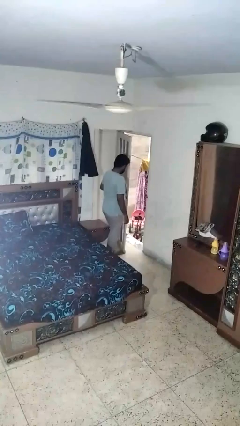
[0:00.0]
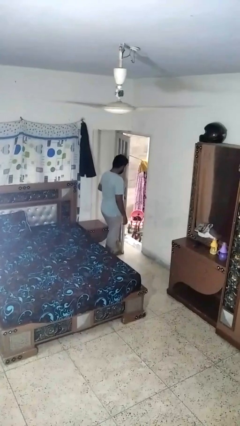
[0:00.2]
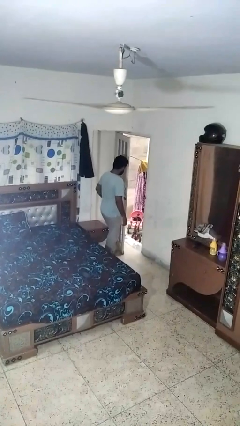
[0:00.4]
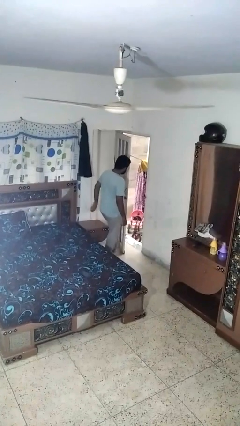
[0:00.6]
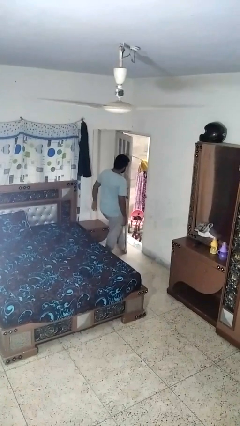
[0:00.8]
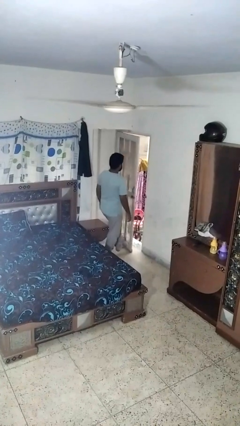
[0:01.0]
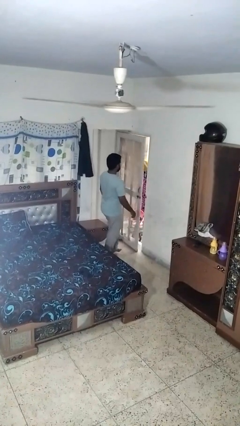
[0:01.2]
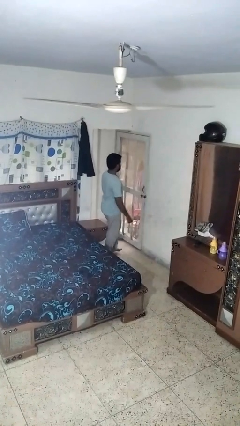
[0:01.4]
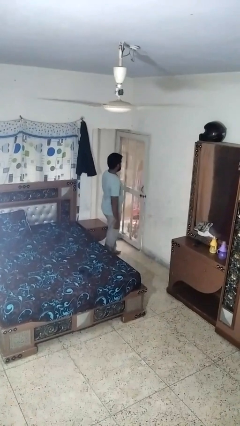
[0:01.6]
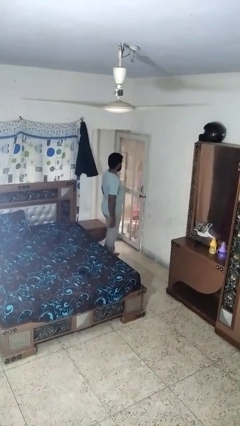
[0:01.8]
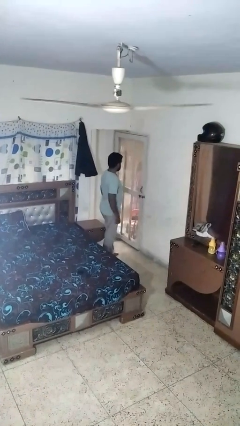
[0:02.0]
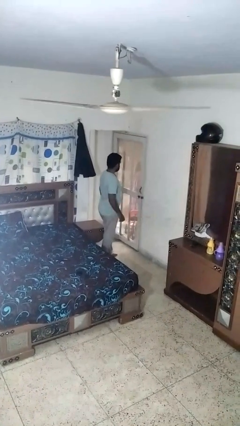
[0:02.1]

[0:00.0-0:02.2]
person closes door with foot

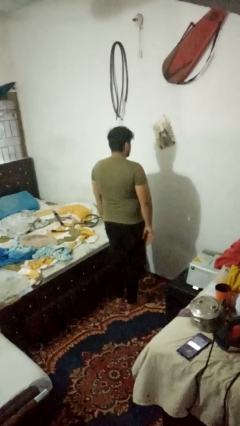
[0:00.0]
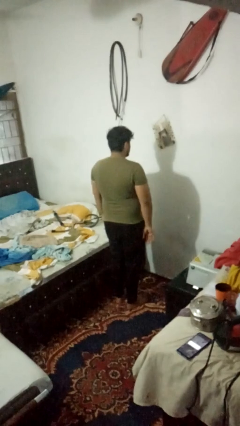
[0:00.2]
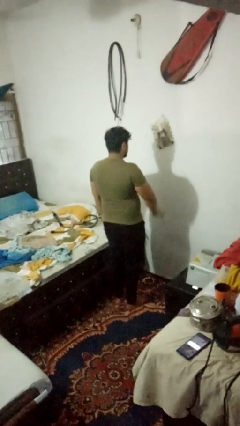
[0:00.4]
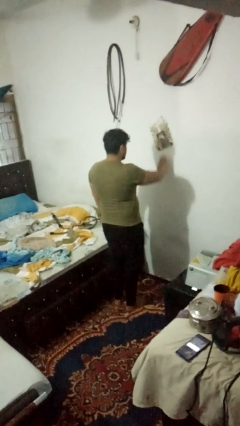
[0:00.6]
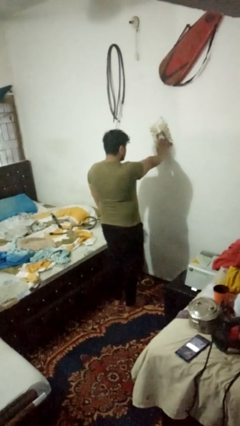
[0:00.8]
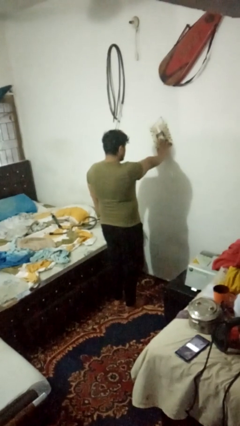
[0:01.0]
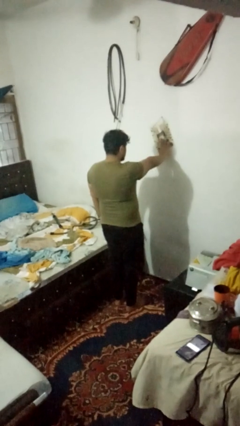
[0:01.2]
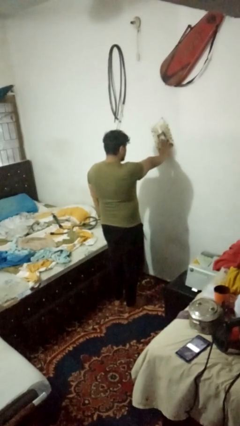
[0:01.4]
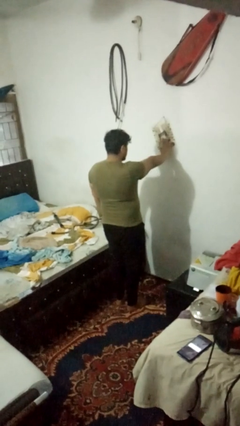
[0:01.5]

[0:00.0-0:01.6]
person gestures stop

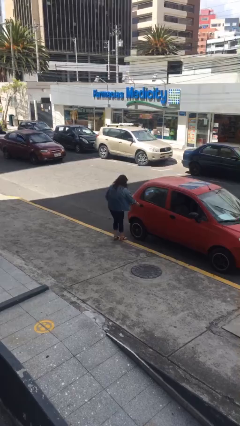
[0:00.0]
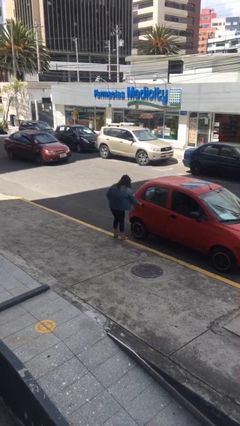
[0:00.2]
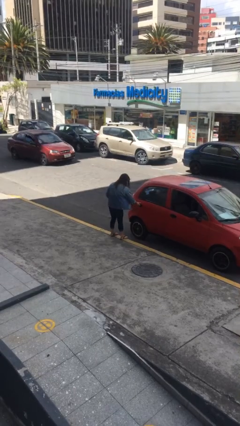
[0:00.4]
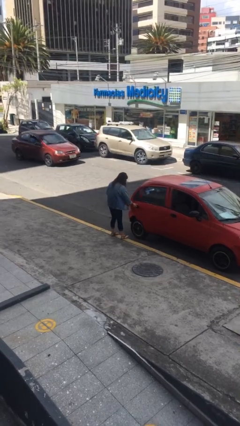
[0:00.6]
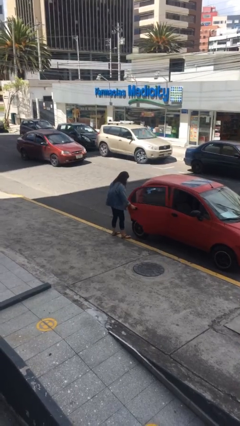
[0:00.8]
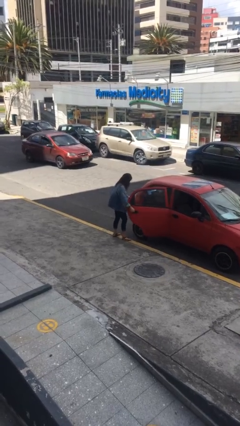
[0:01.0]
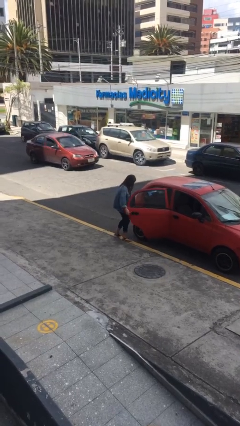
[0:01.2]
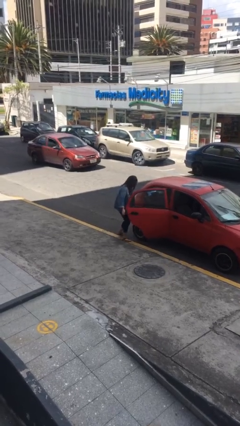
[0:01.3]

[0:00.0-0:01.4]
person opens car door

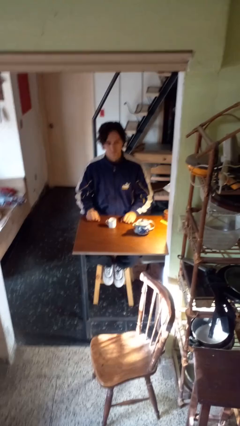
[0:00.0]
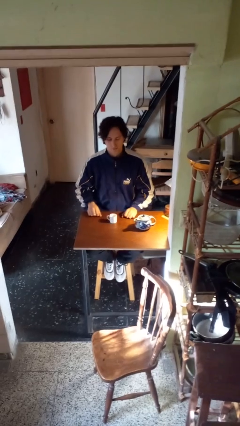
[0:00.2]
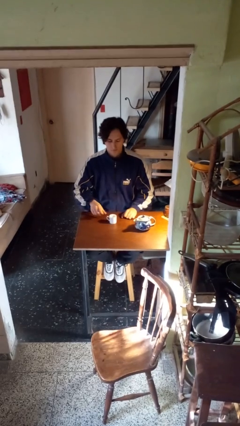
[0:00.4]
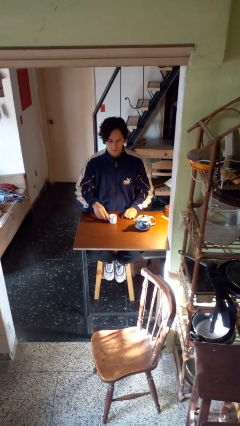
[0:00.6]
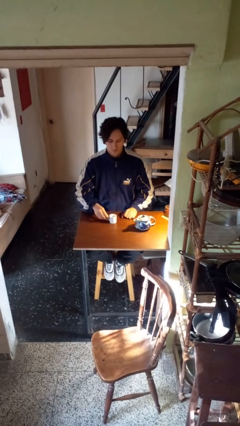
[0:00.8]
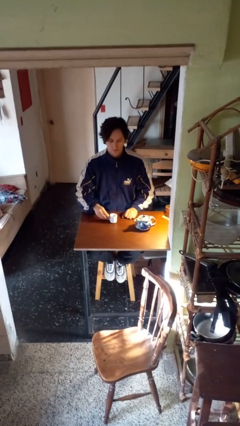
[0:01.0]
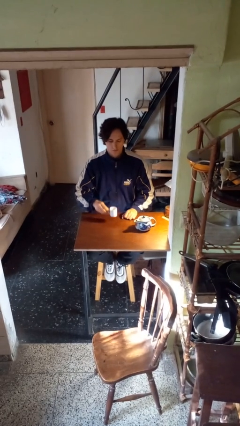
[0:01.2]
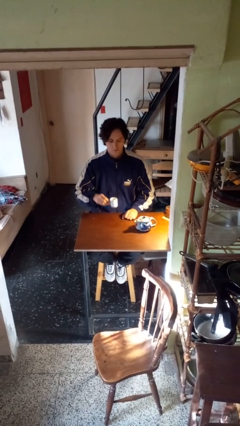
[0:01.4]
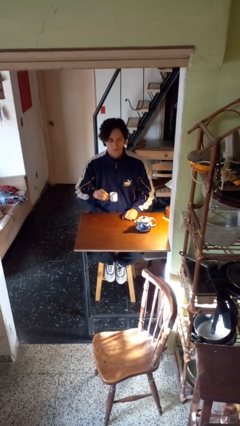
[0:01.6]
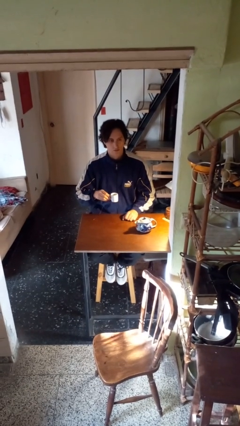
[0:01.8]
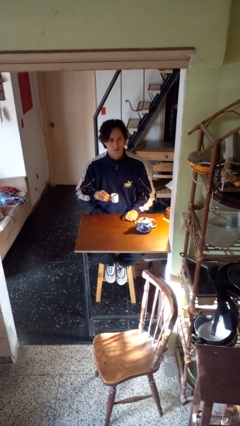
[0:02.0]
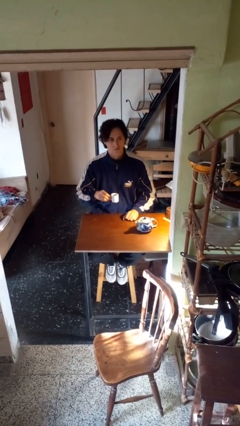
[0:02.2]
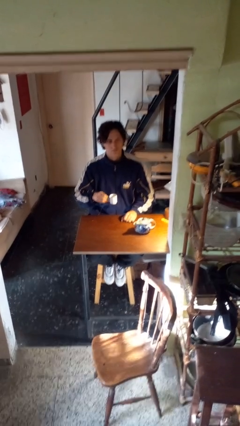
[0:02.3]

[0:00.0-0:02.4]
person picks up object from table

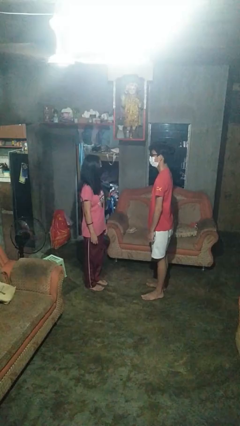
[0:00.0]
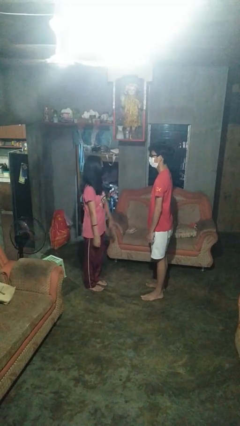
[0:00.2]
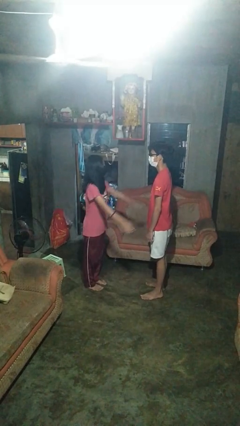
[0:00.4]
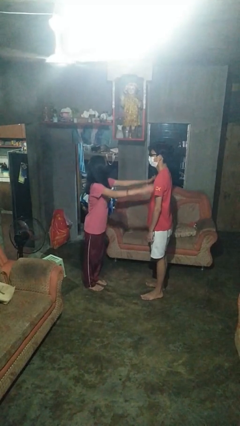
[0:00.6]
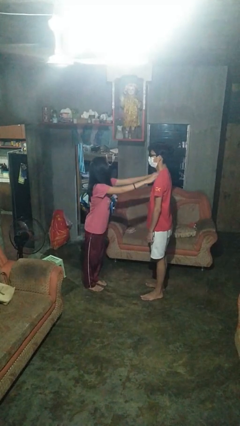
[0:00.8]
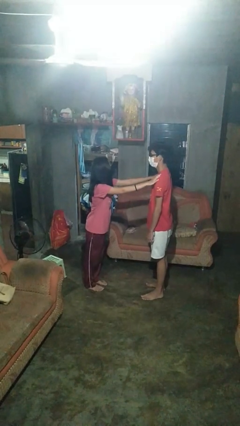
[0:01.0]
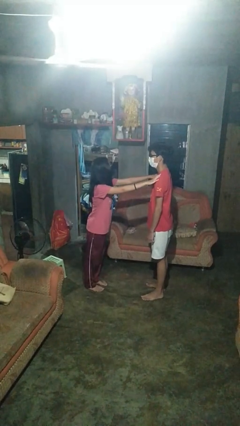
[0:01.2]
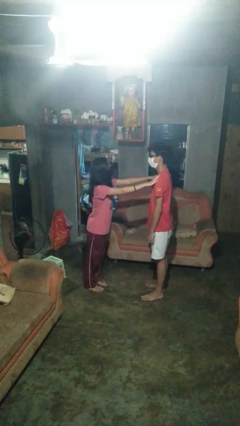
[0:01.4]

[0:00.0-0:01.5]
person pounds shoulders of person

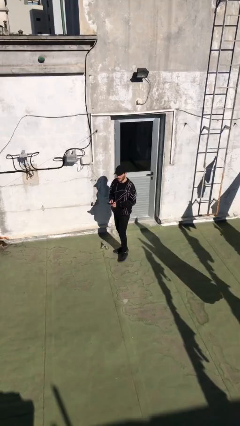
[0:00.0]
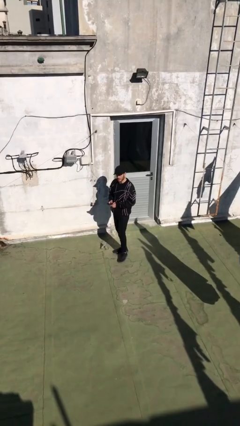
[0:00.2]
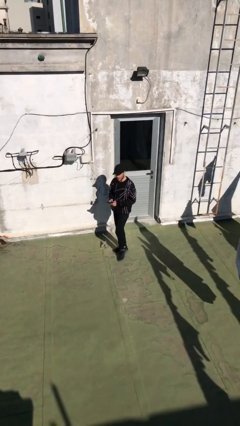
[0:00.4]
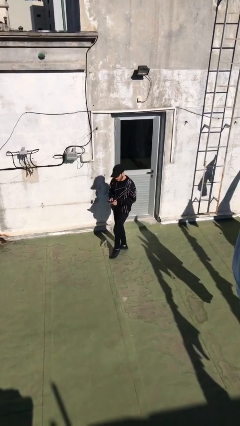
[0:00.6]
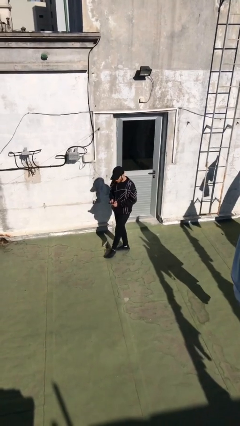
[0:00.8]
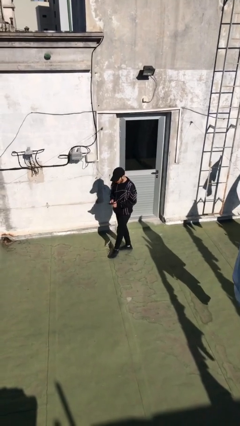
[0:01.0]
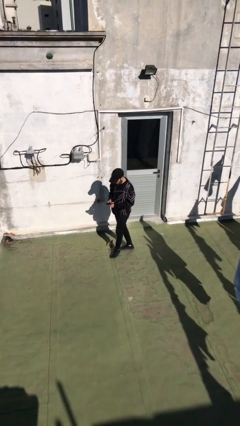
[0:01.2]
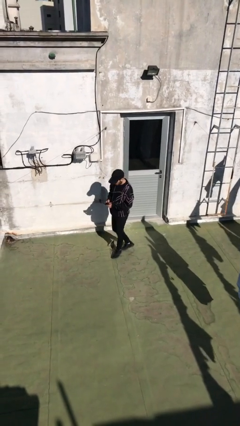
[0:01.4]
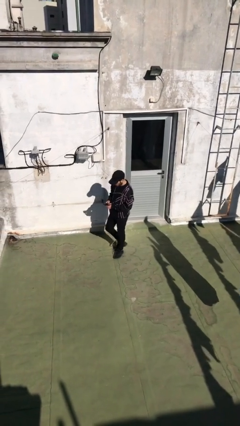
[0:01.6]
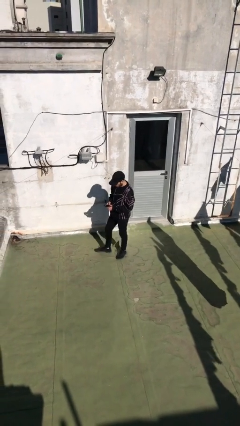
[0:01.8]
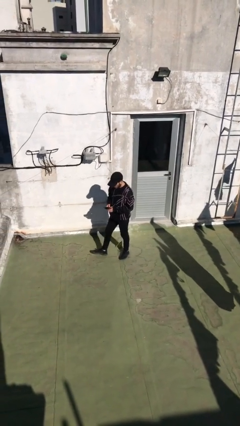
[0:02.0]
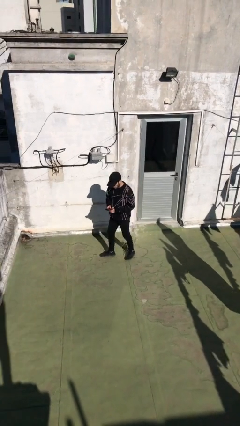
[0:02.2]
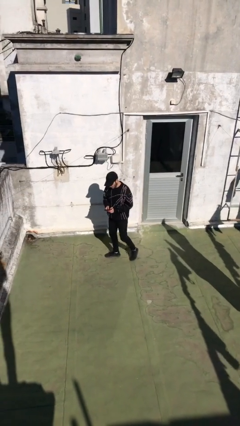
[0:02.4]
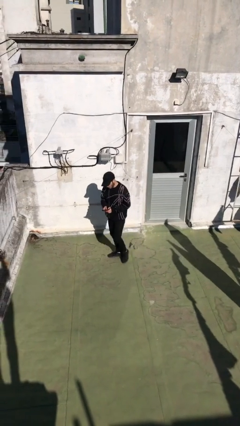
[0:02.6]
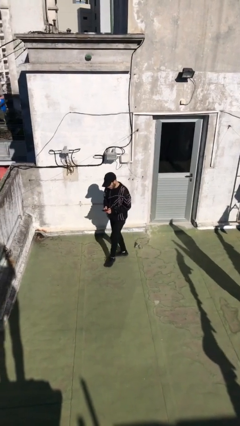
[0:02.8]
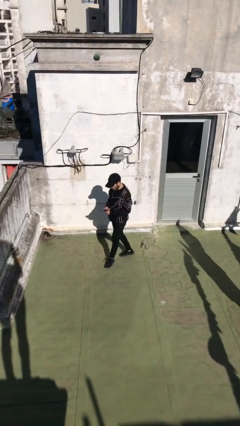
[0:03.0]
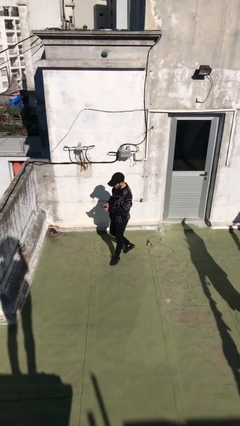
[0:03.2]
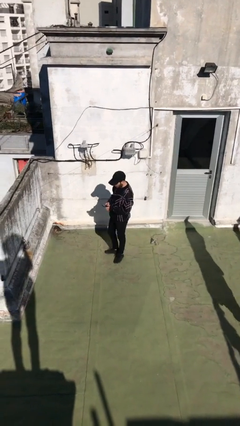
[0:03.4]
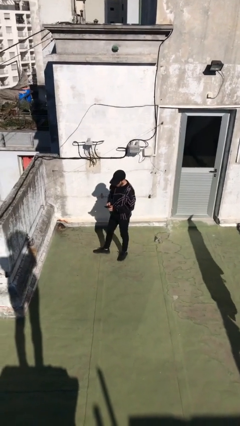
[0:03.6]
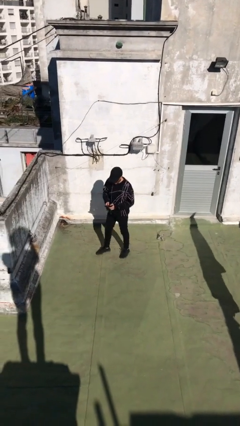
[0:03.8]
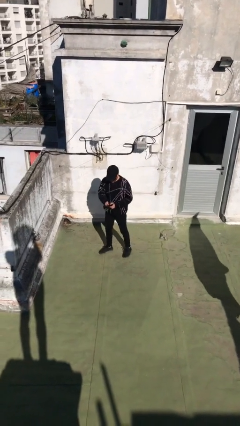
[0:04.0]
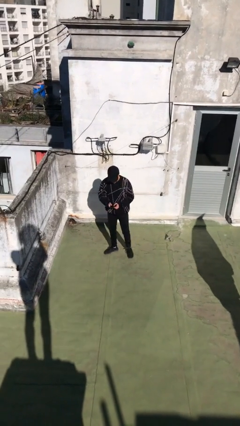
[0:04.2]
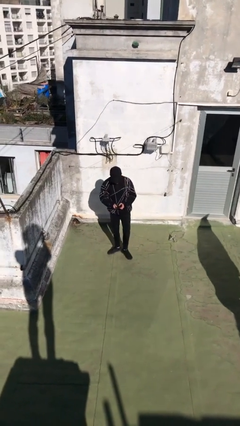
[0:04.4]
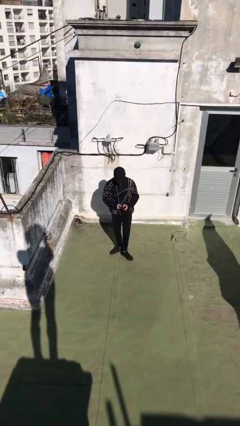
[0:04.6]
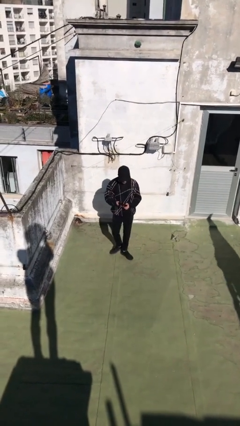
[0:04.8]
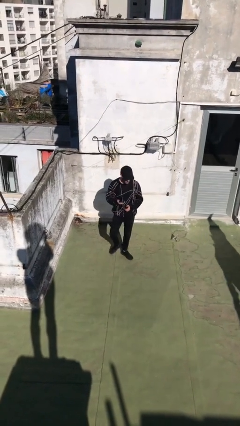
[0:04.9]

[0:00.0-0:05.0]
person texts on phone

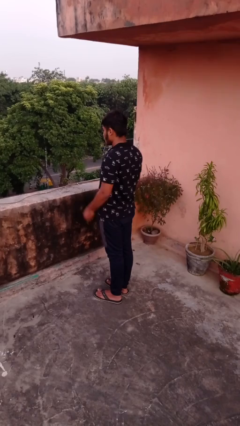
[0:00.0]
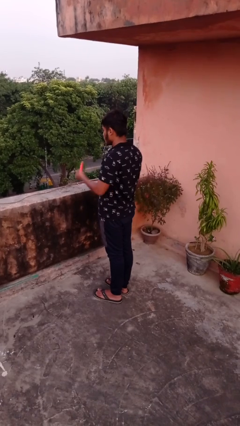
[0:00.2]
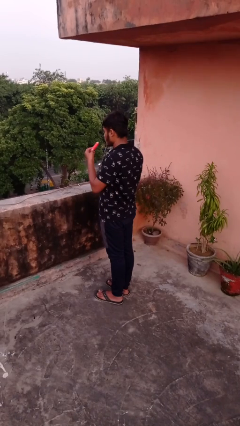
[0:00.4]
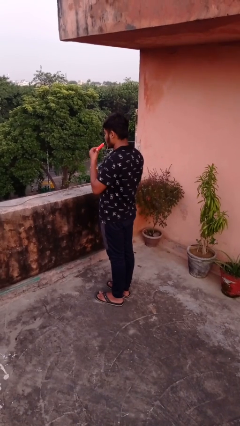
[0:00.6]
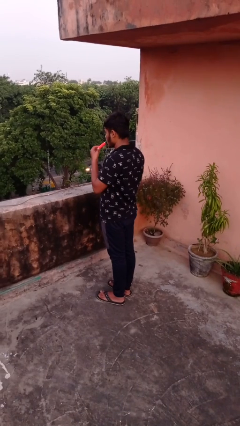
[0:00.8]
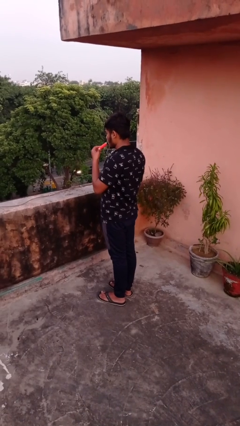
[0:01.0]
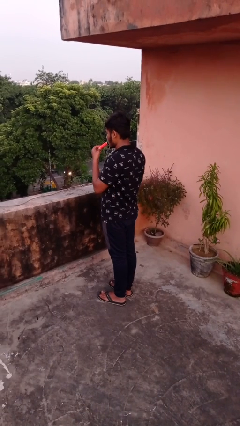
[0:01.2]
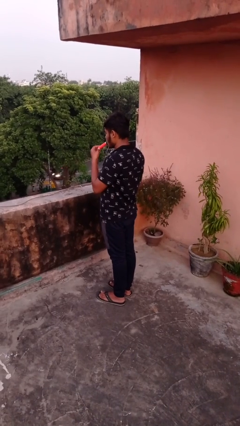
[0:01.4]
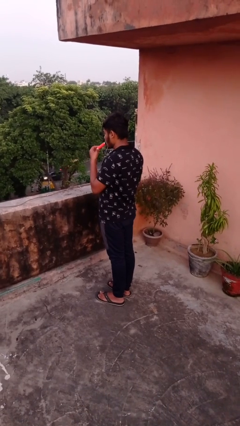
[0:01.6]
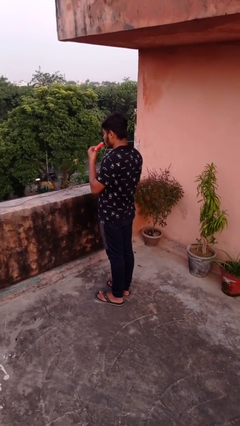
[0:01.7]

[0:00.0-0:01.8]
person vapes

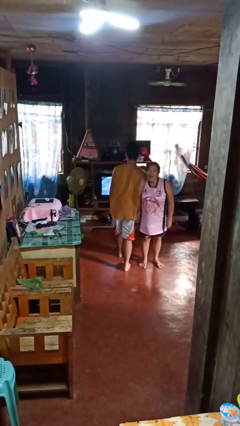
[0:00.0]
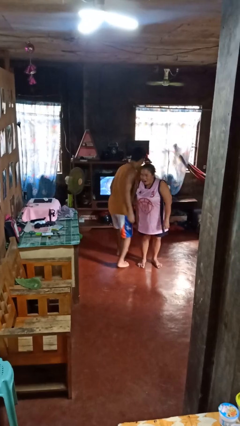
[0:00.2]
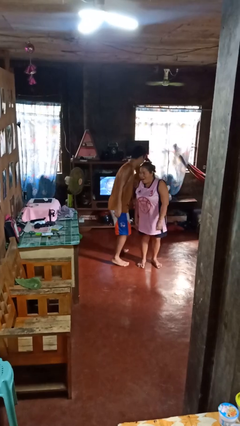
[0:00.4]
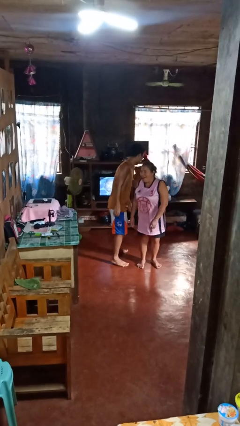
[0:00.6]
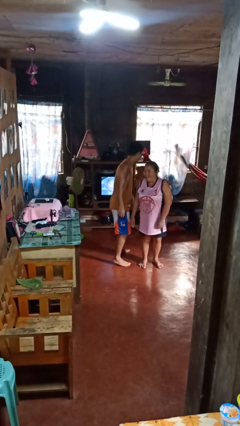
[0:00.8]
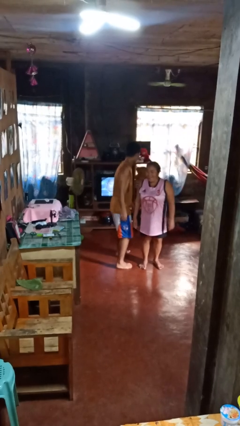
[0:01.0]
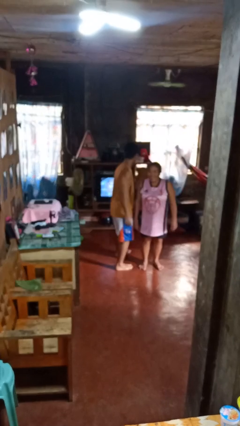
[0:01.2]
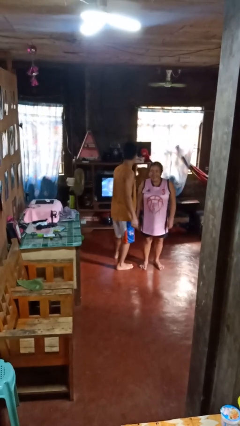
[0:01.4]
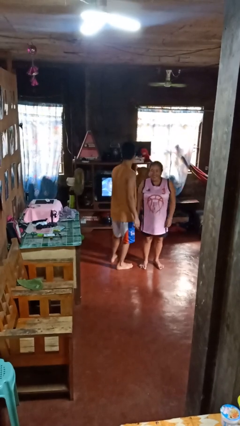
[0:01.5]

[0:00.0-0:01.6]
person bumps into person
